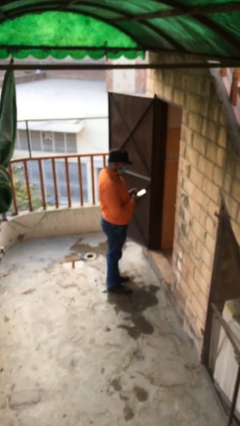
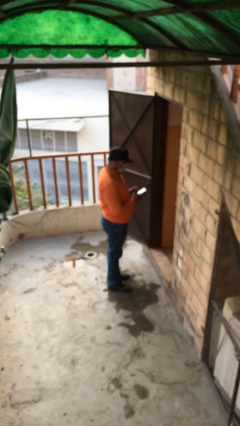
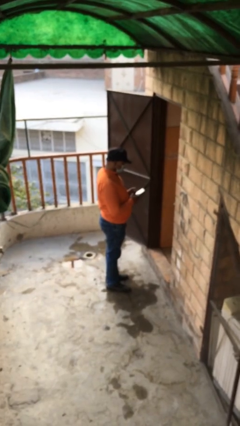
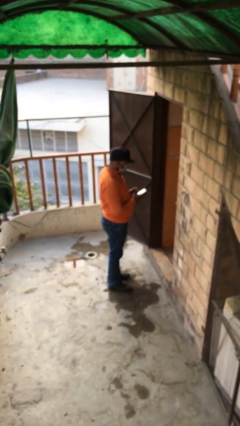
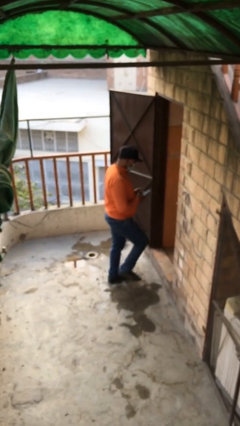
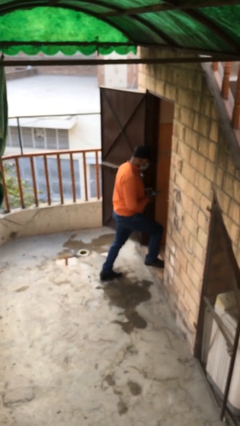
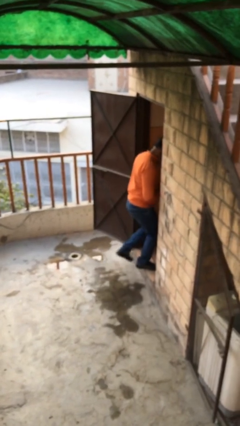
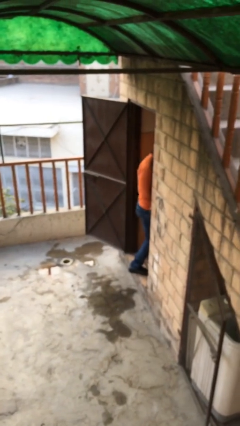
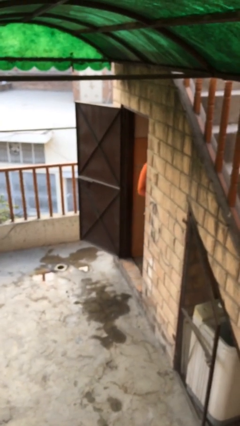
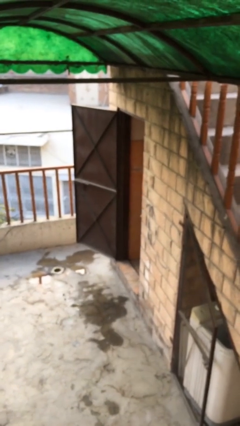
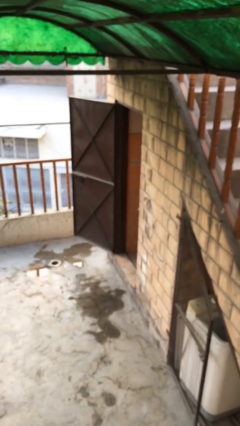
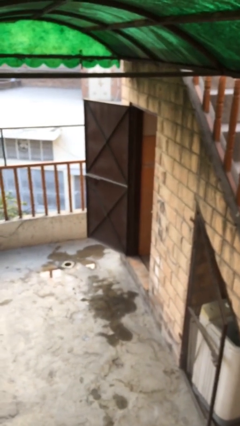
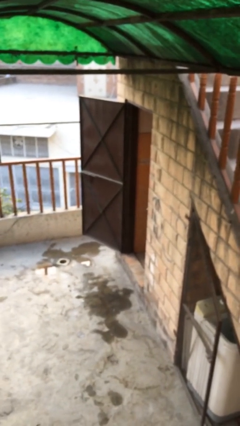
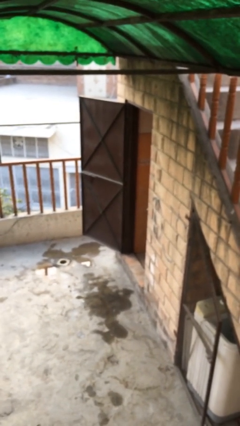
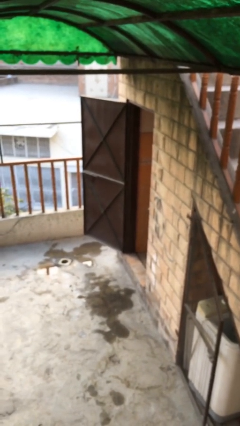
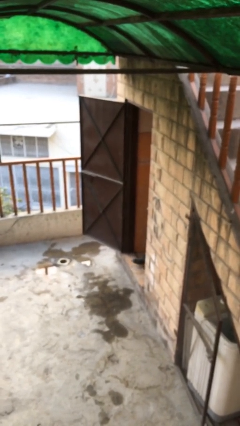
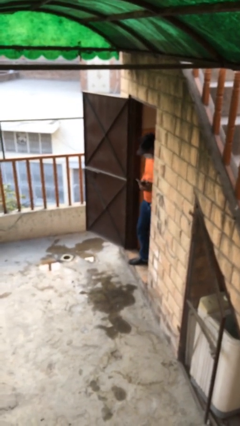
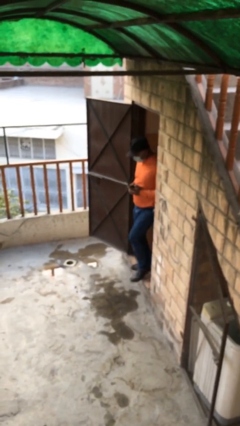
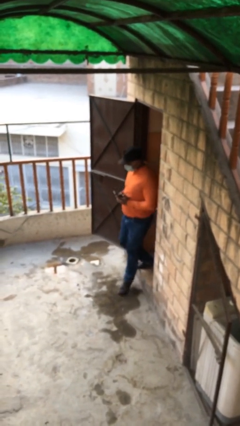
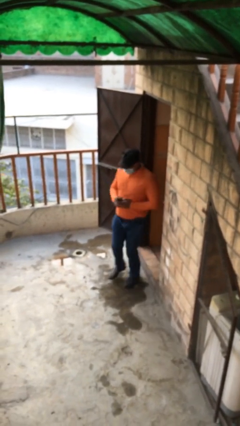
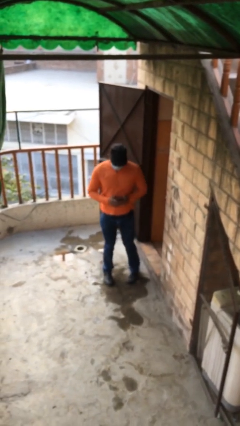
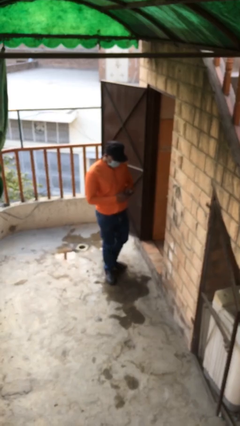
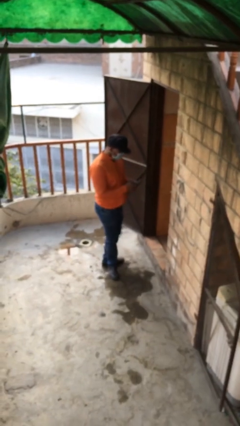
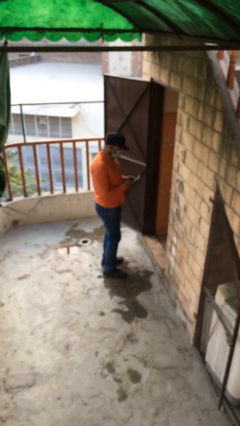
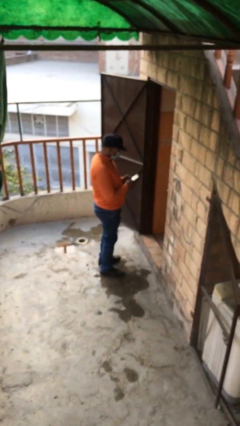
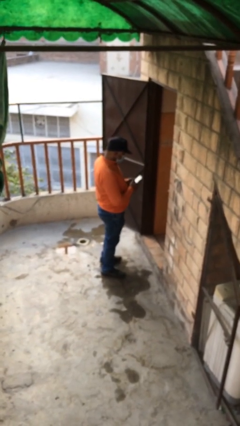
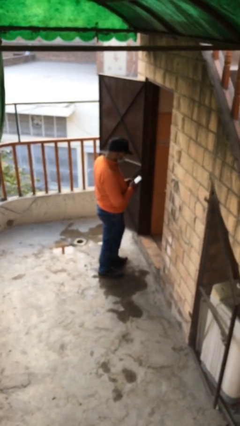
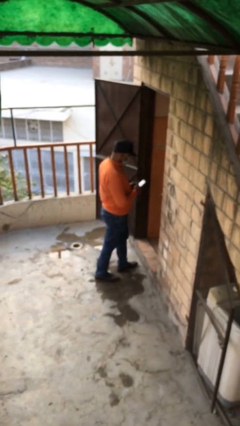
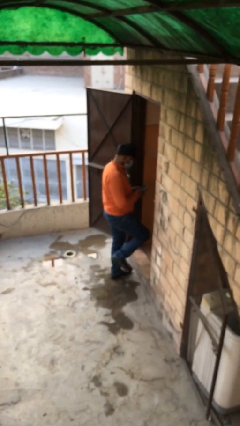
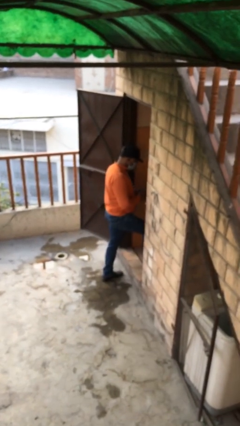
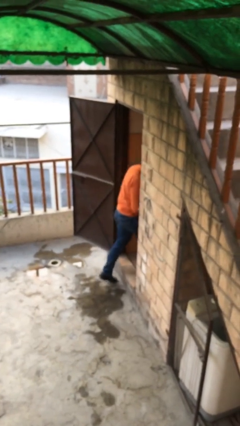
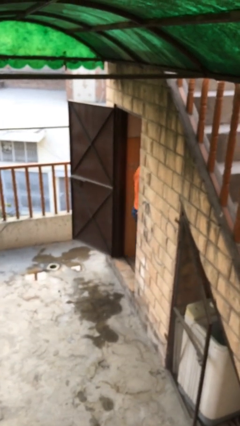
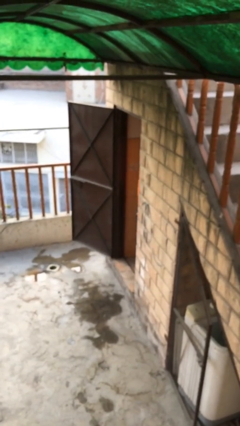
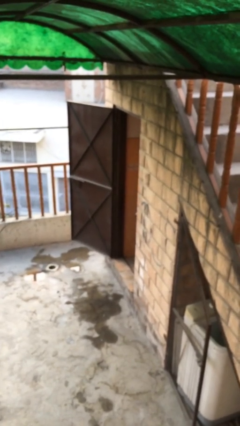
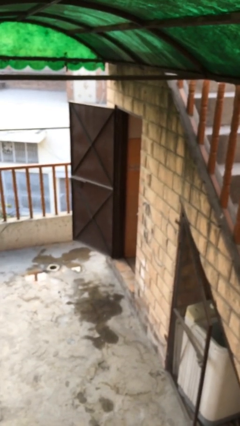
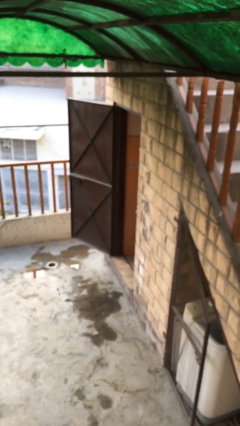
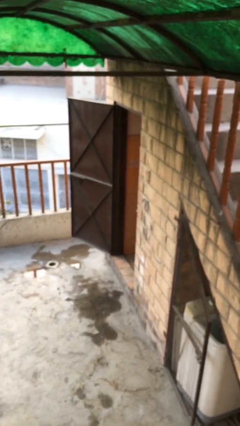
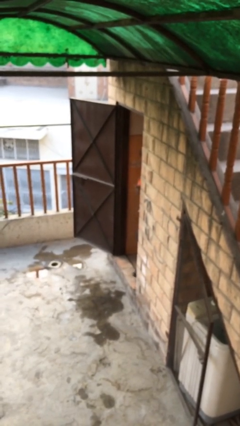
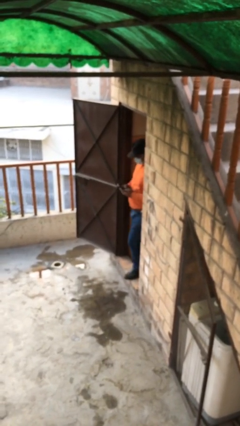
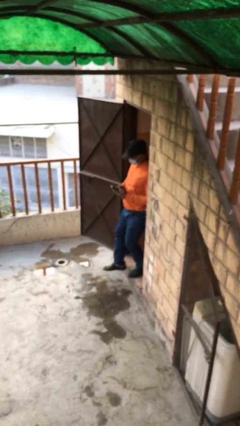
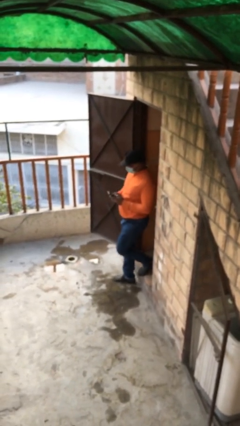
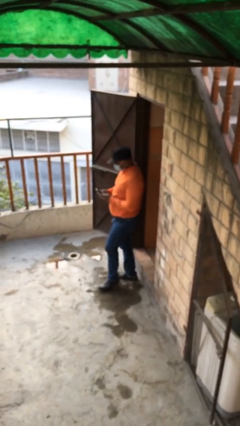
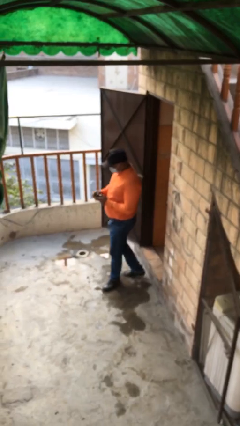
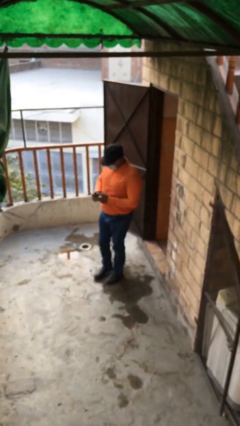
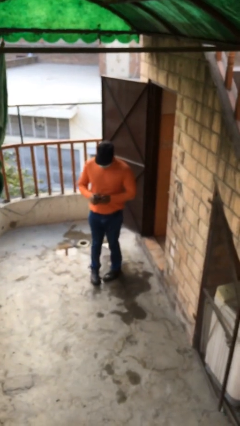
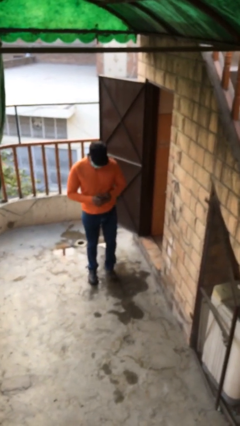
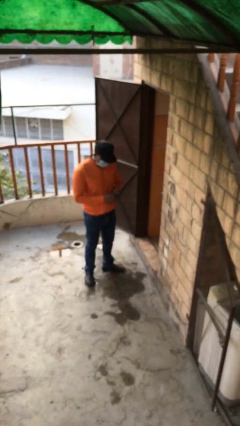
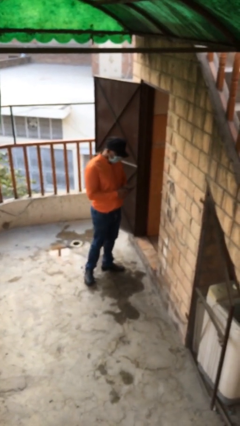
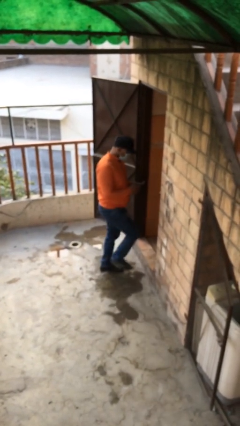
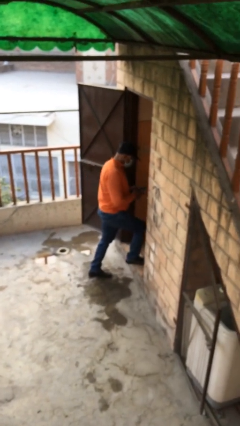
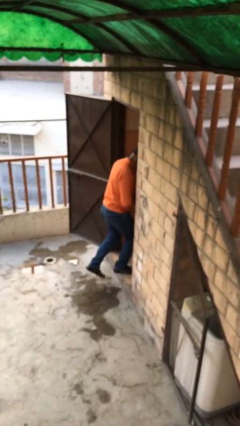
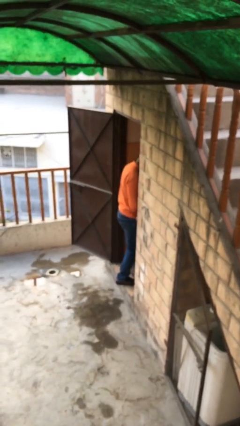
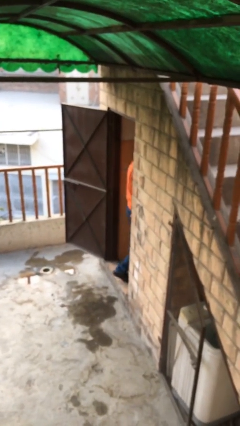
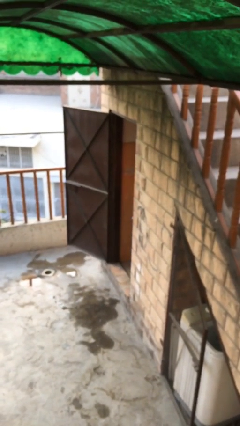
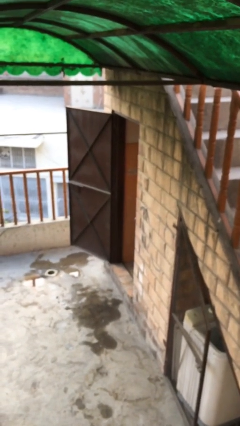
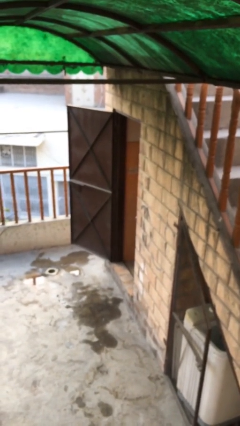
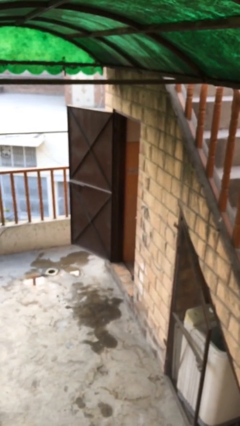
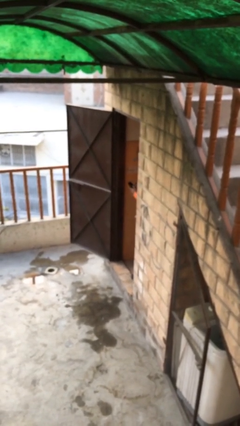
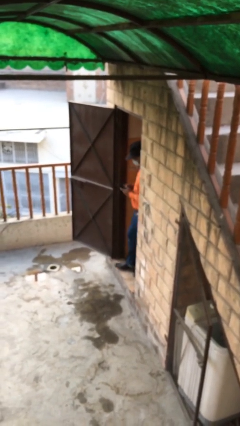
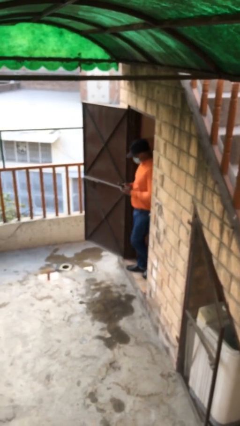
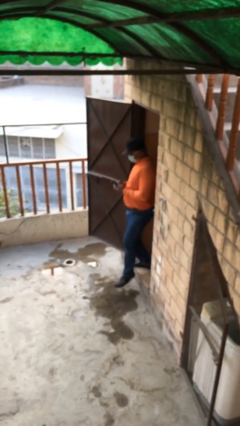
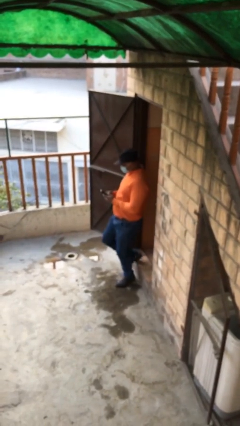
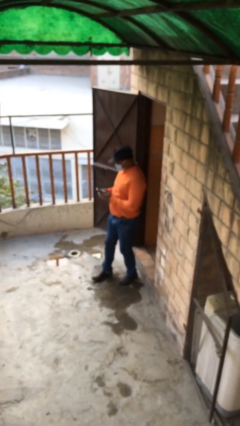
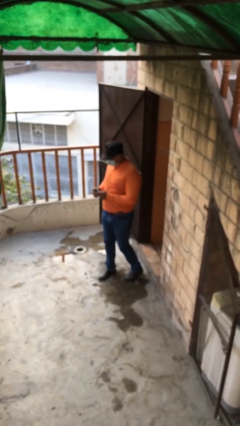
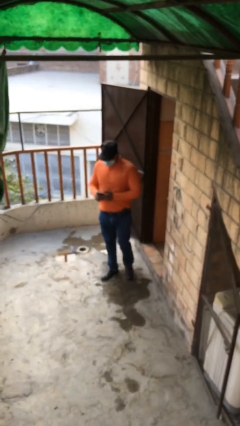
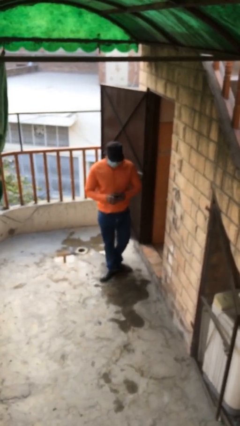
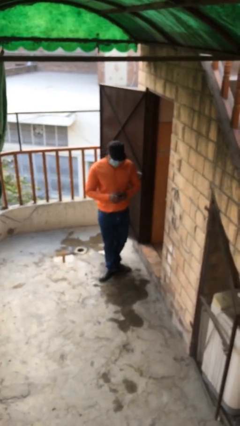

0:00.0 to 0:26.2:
person texts on phone

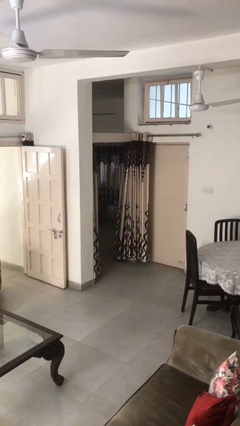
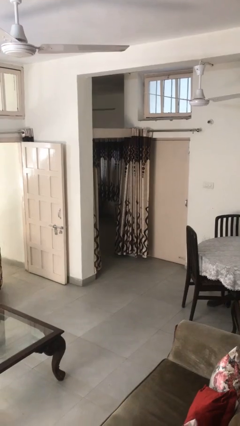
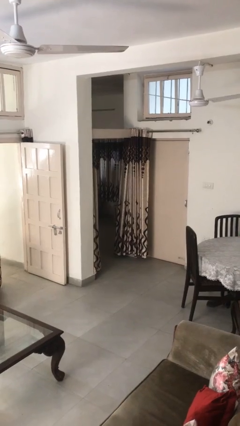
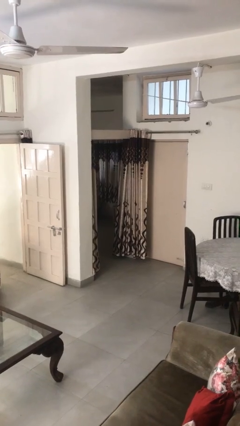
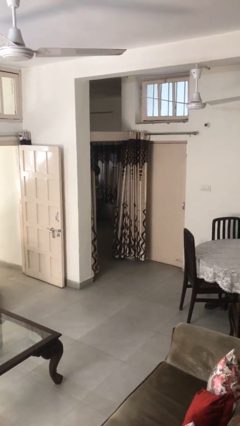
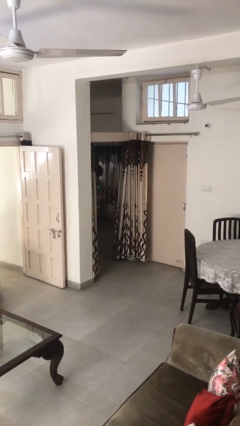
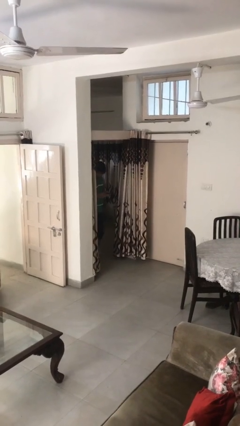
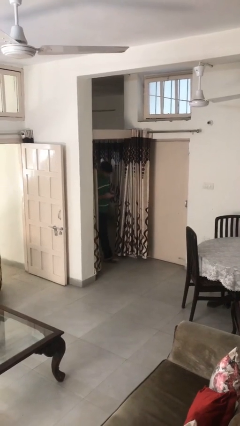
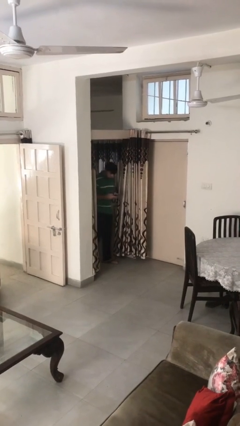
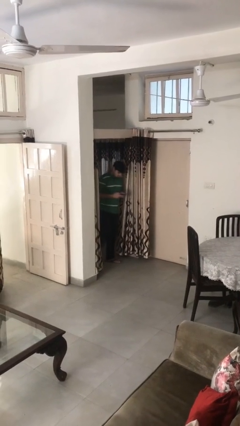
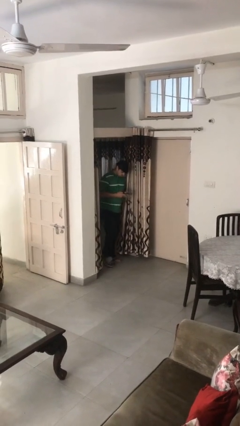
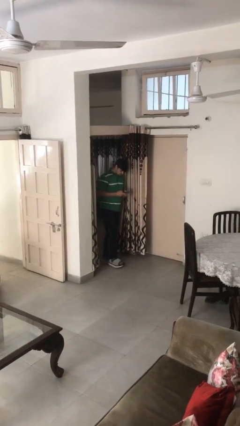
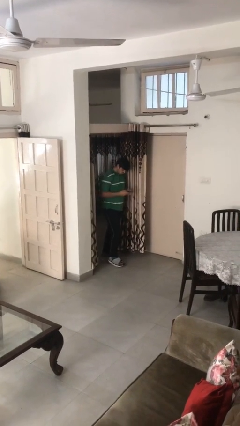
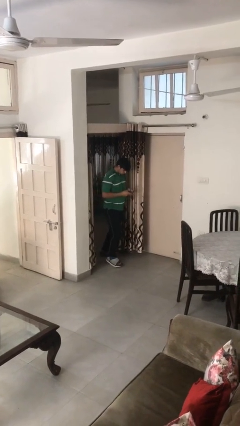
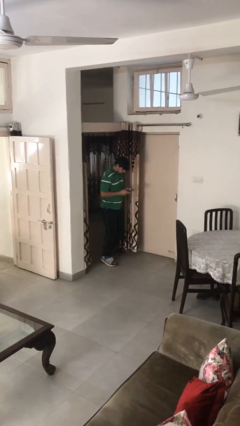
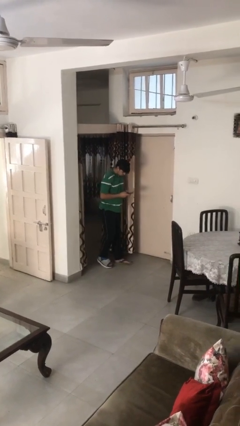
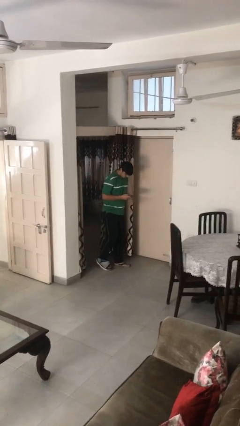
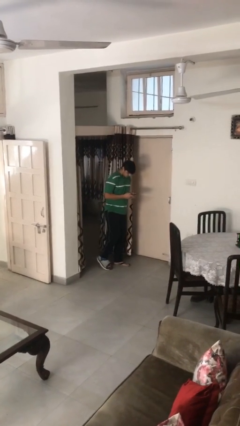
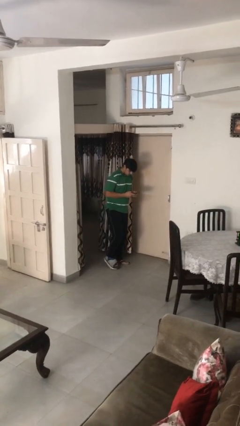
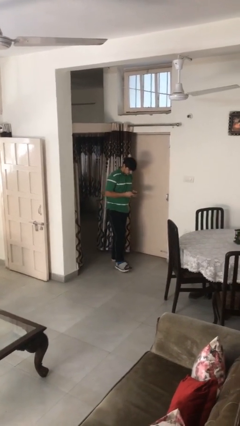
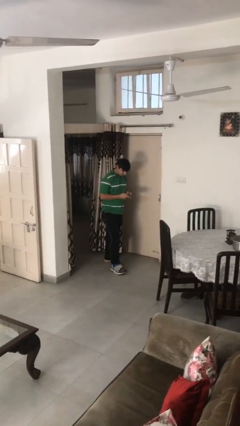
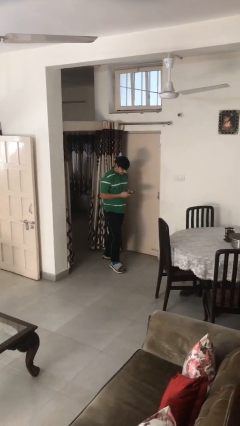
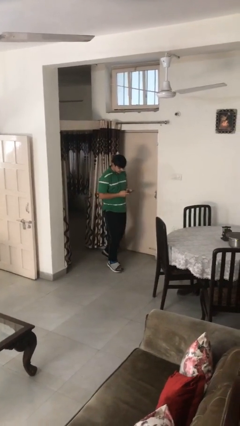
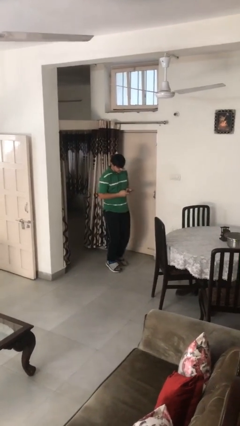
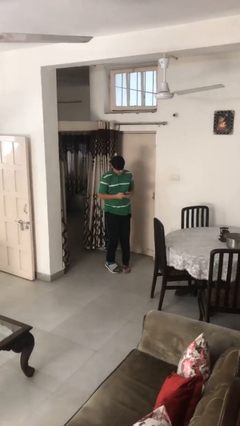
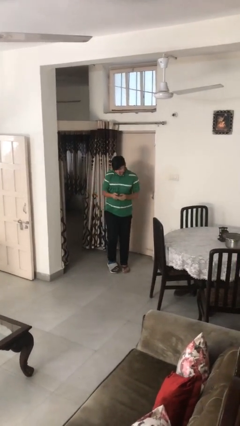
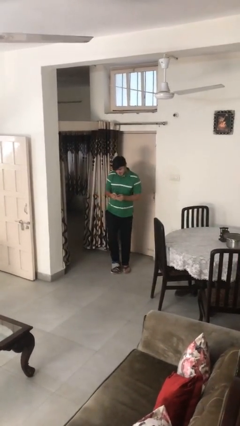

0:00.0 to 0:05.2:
person enters scene through structure
